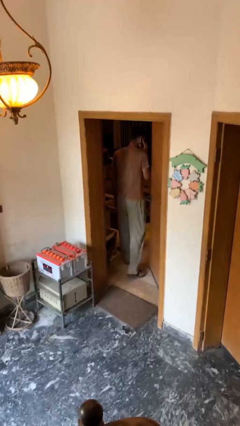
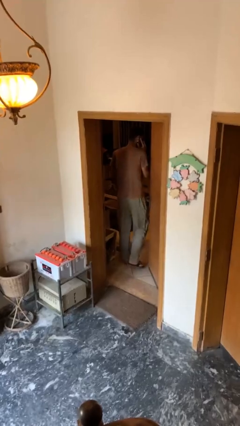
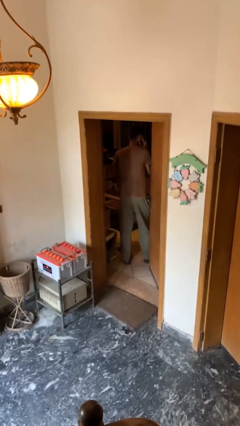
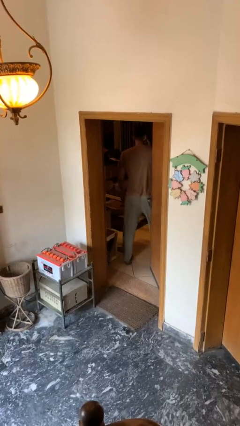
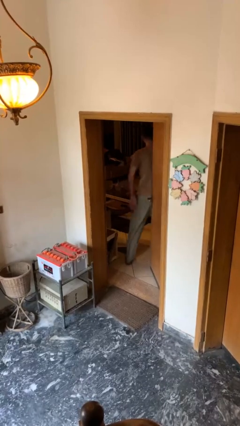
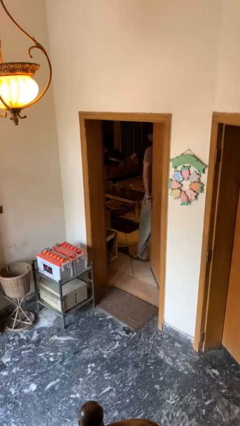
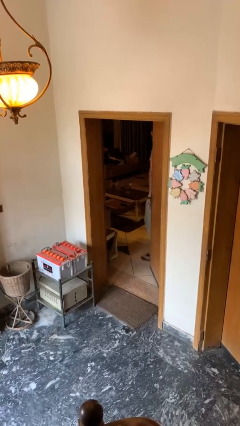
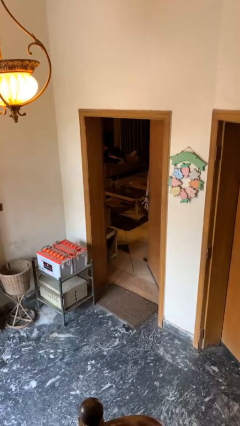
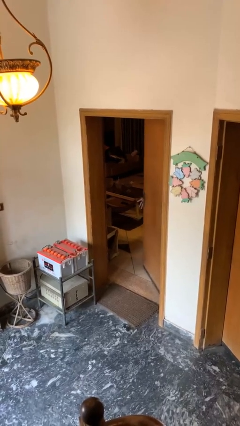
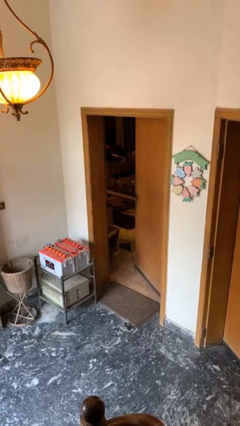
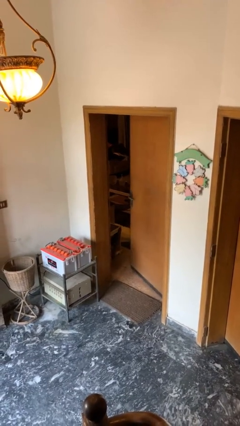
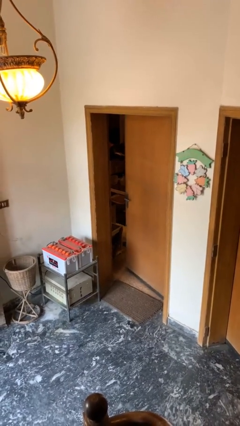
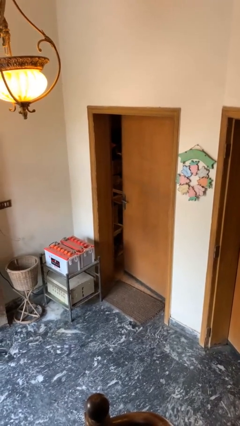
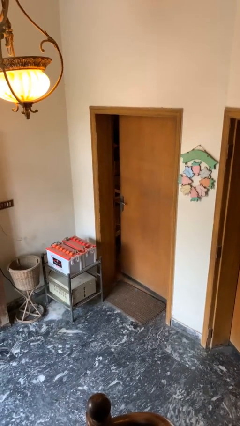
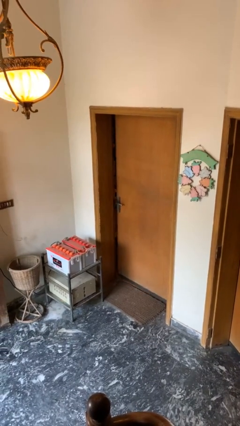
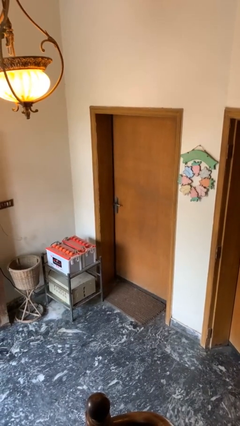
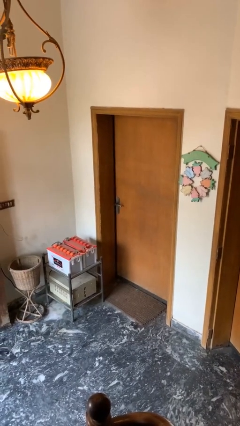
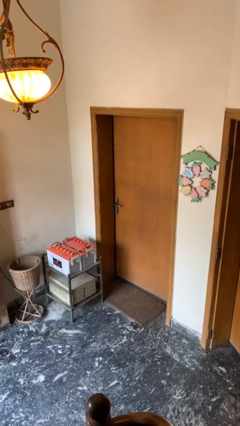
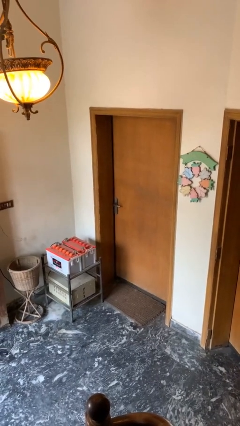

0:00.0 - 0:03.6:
person closes facility door

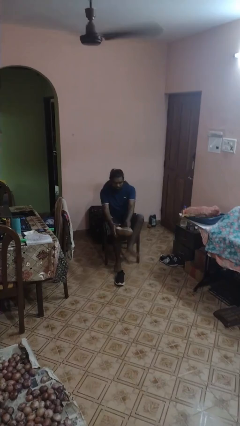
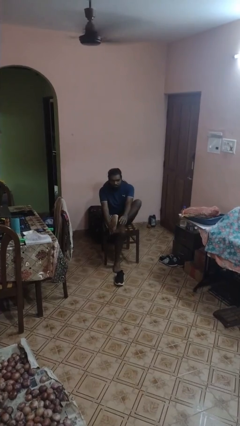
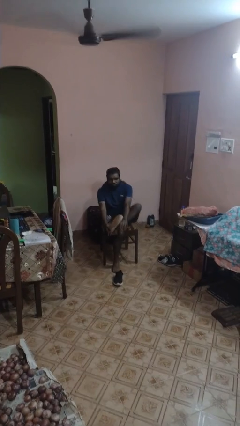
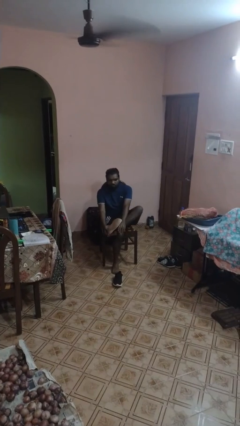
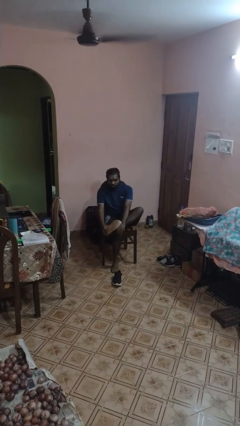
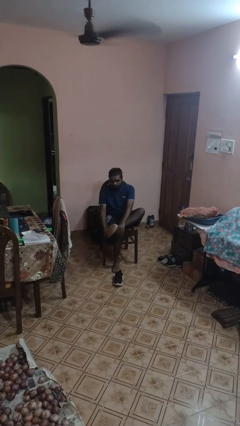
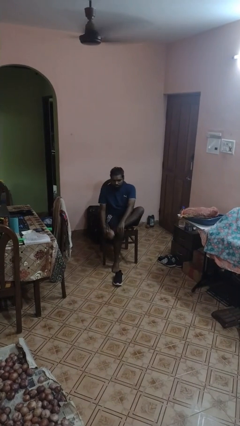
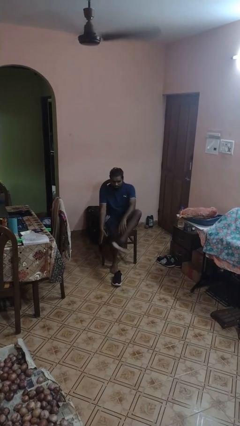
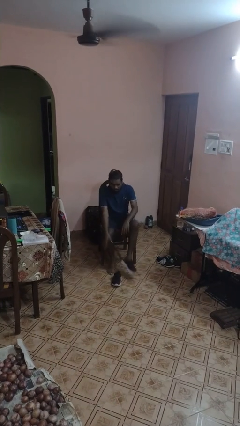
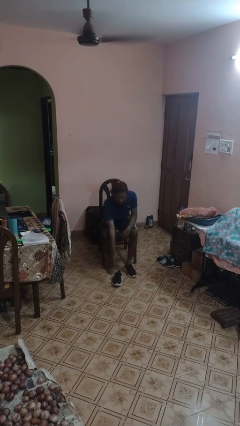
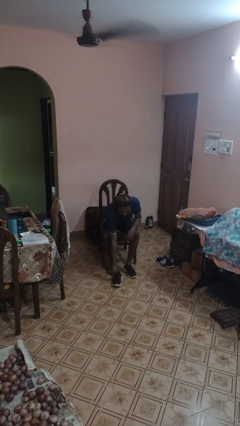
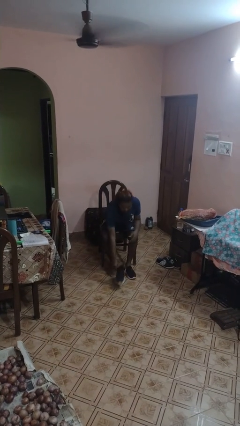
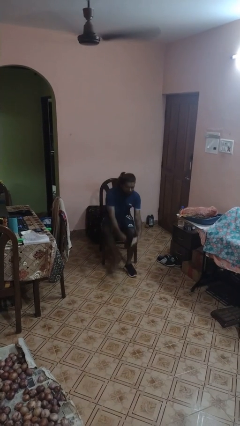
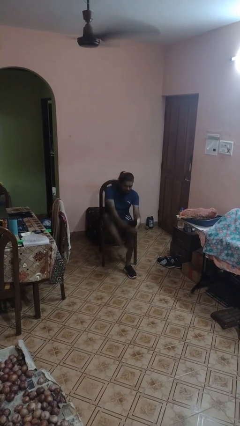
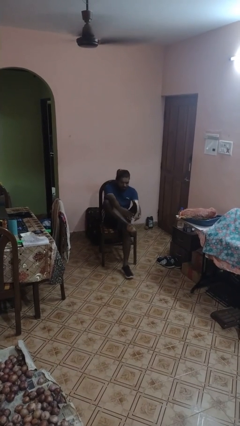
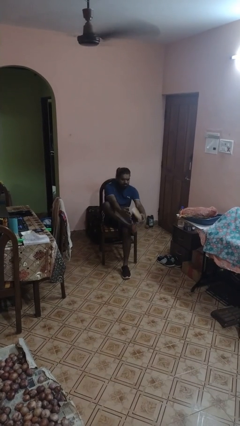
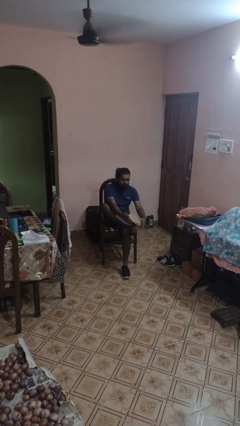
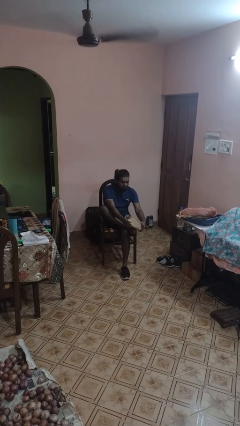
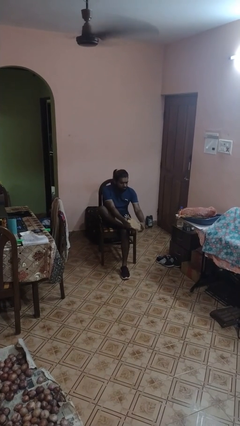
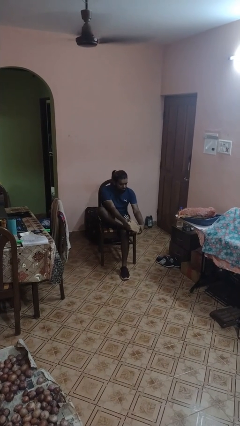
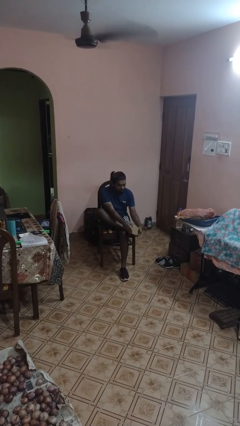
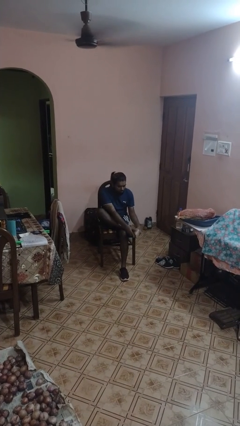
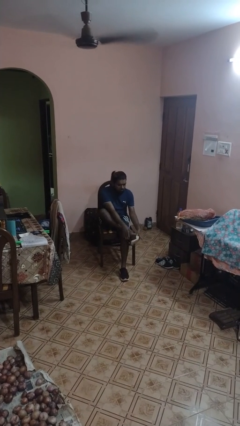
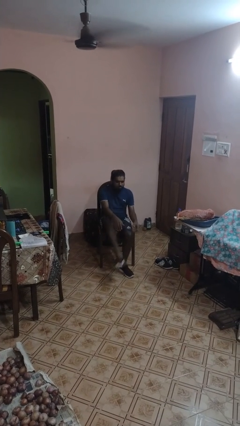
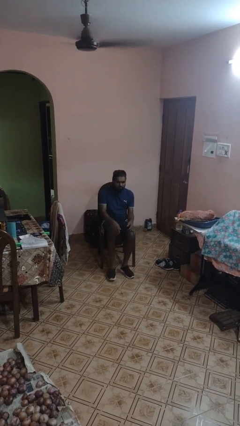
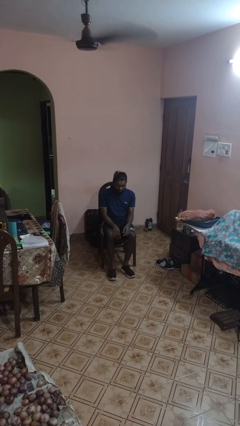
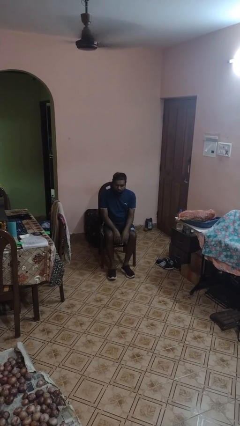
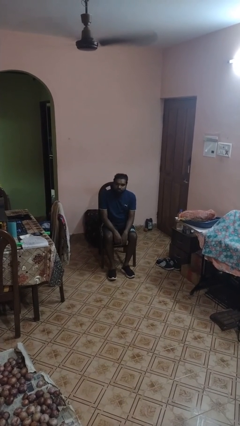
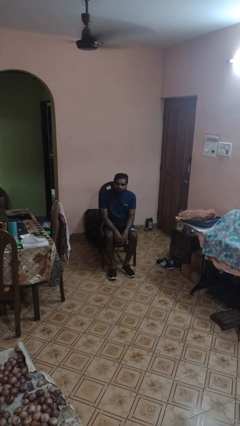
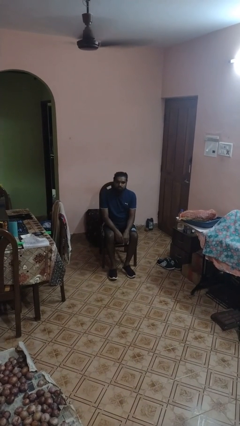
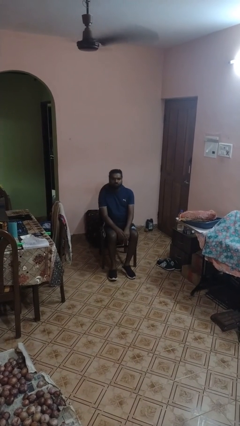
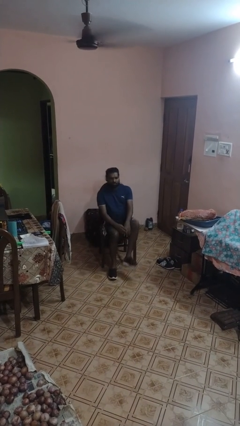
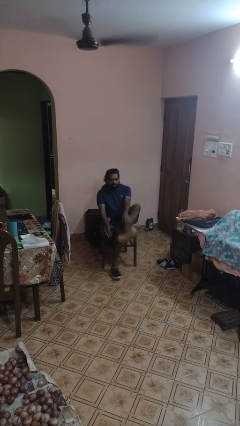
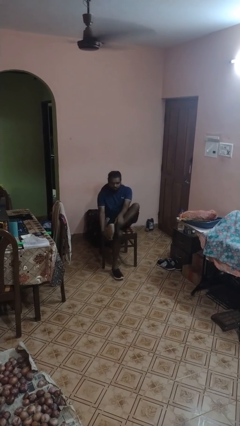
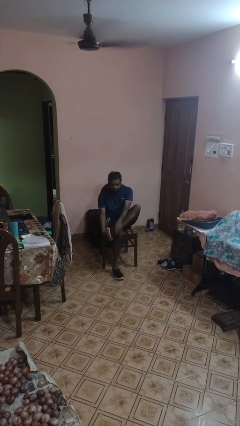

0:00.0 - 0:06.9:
person puts on shoes

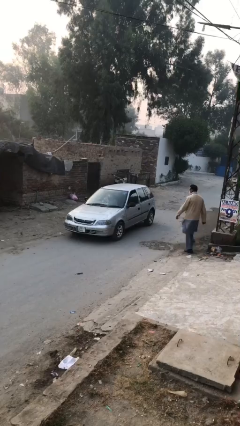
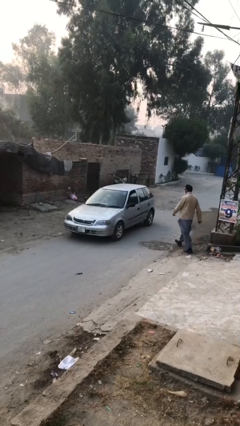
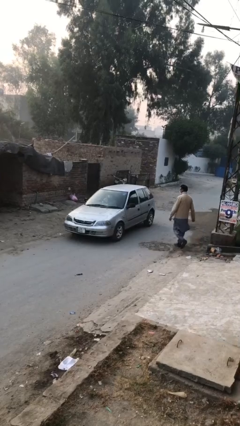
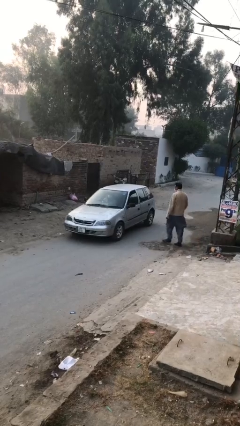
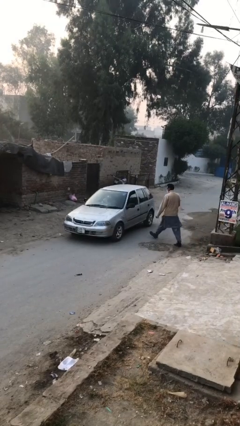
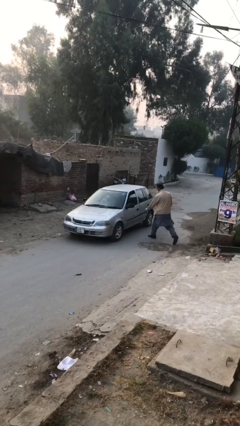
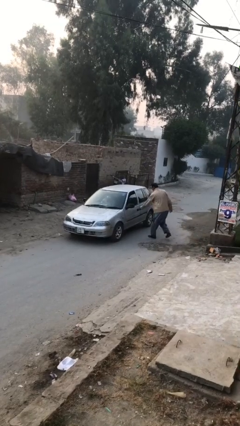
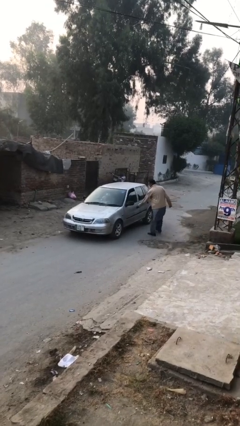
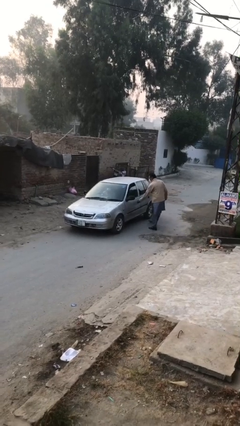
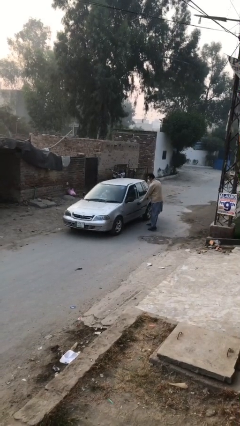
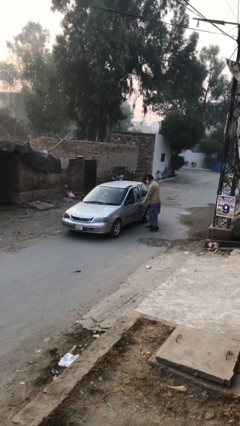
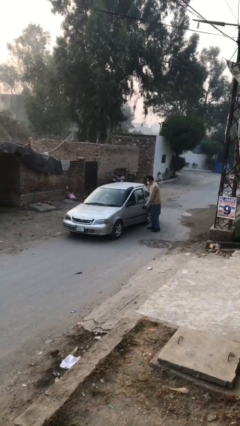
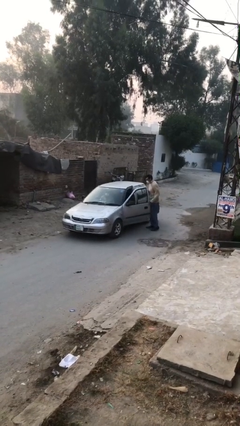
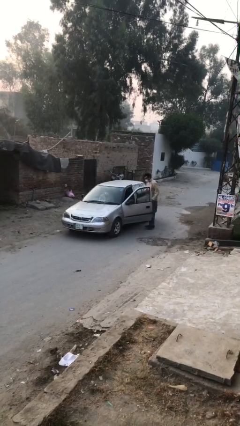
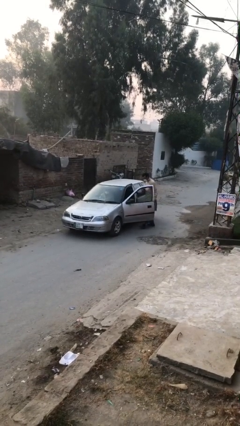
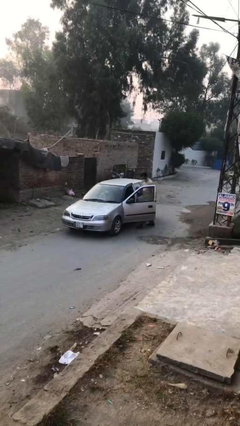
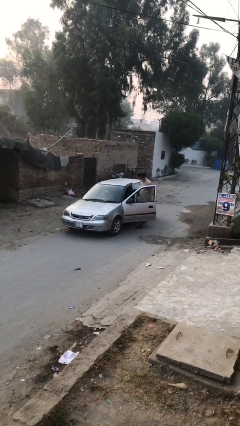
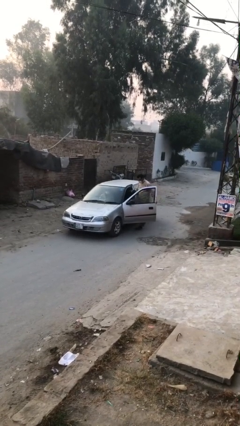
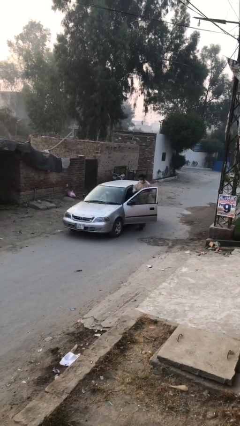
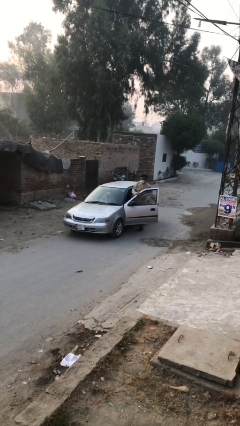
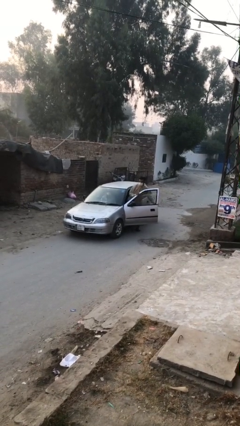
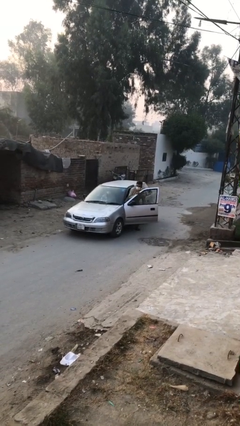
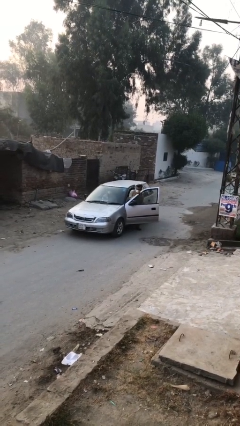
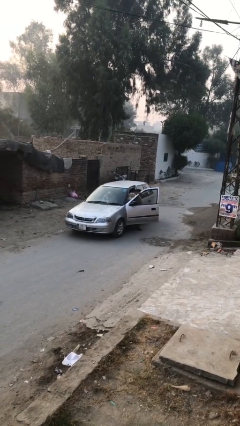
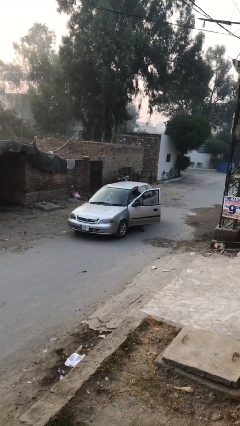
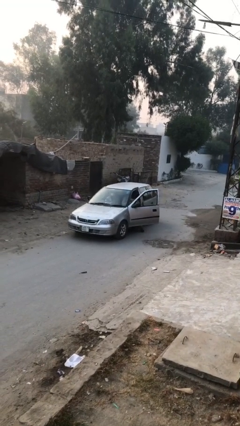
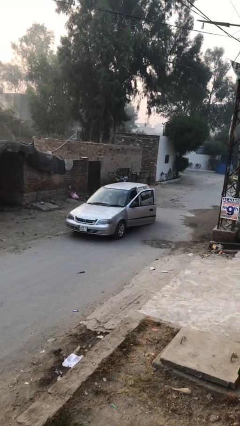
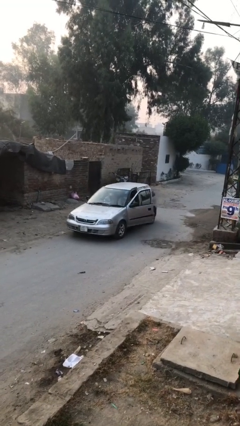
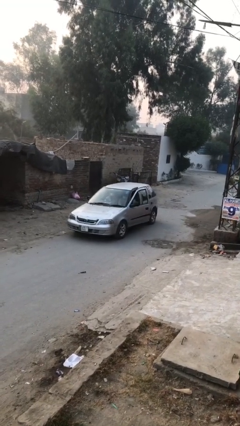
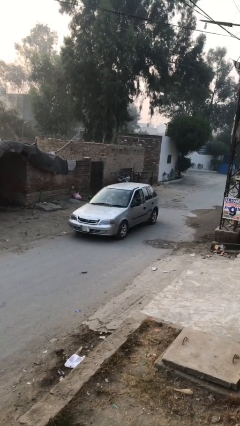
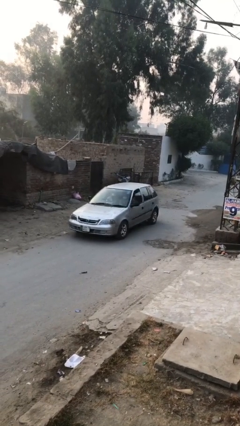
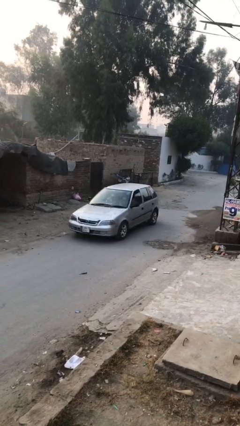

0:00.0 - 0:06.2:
car picks up person

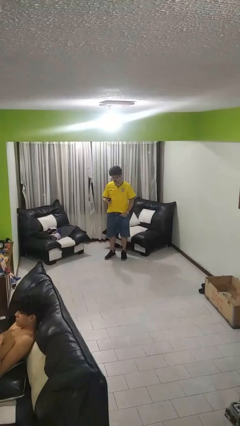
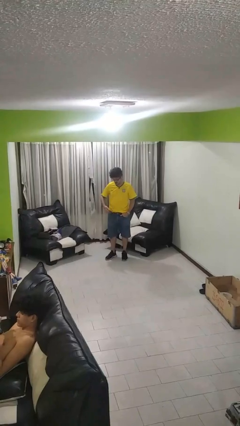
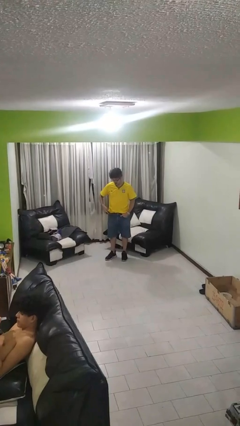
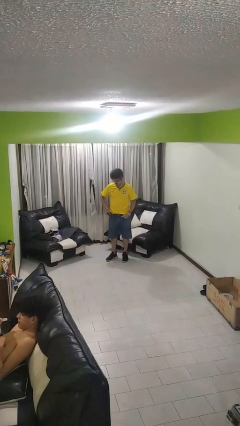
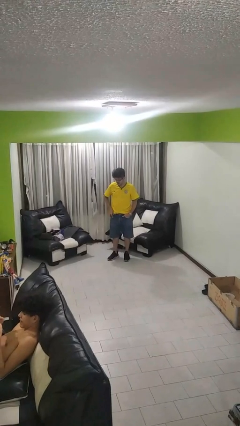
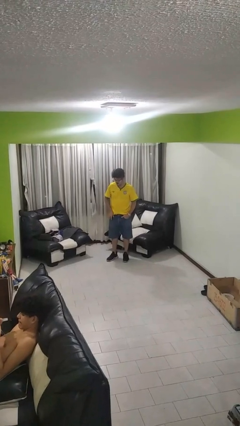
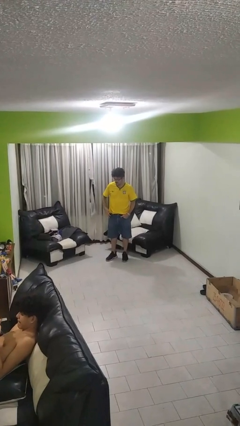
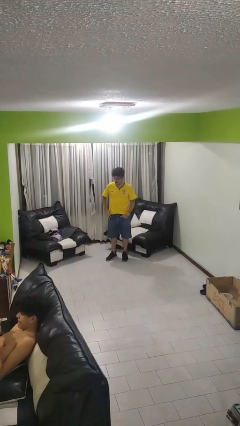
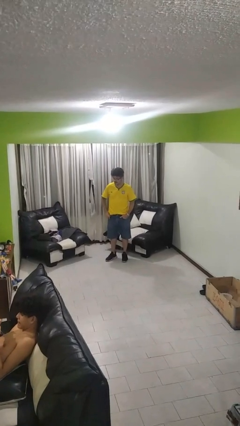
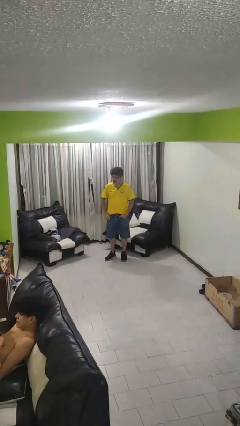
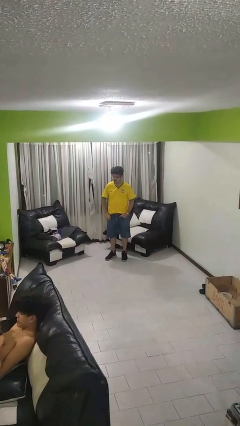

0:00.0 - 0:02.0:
person puts phone into pocket
